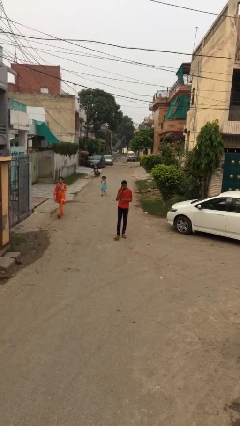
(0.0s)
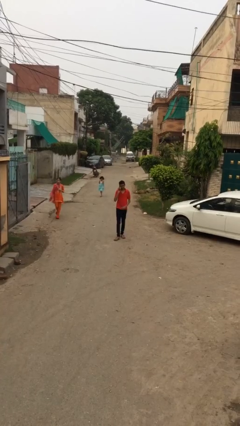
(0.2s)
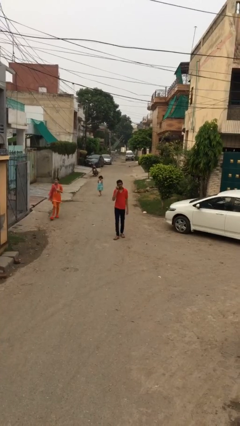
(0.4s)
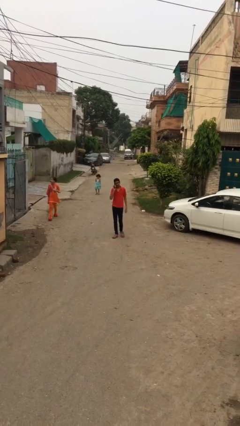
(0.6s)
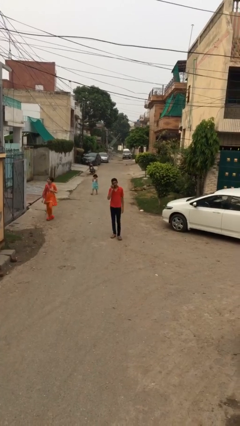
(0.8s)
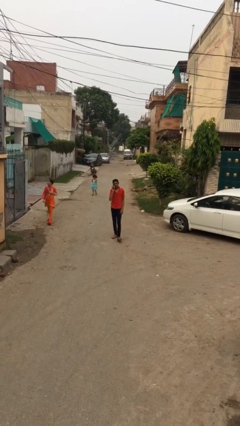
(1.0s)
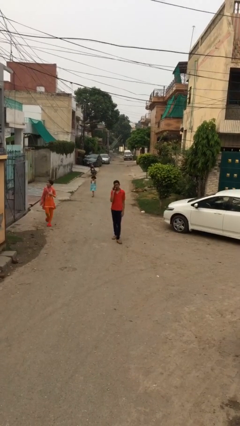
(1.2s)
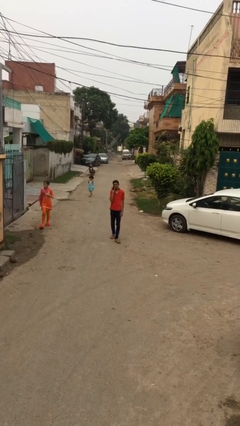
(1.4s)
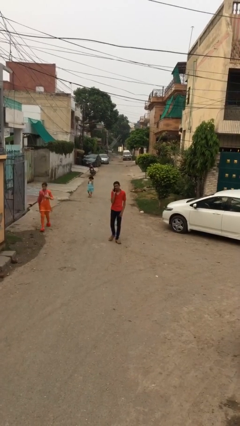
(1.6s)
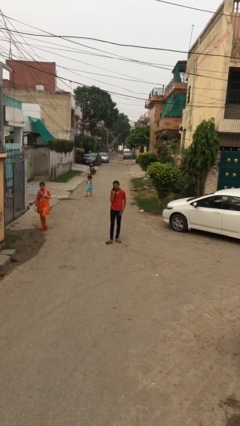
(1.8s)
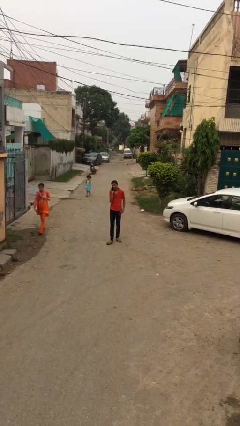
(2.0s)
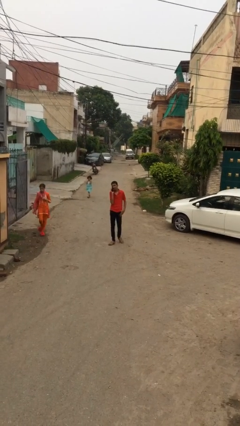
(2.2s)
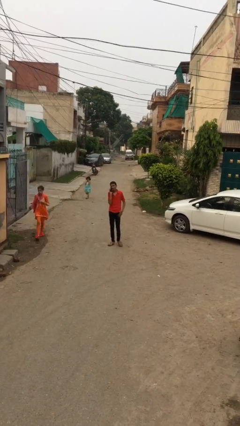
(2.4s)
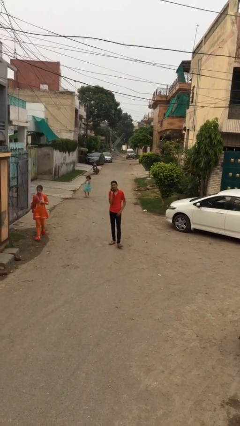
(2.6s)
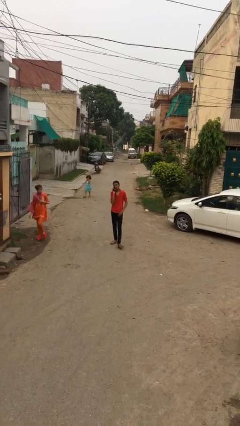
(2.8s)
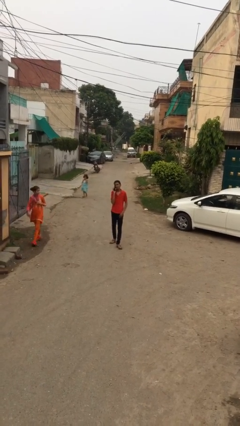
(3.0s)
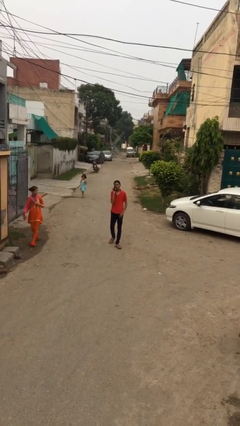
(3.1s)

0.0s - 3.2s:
person talks on phone

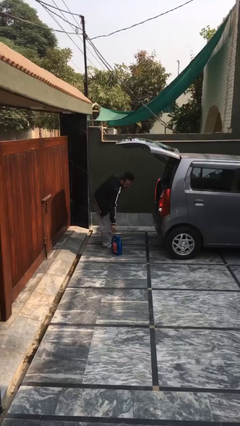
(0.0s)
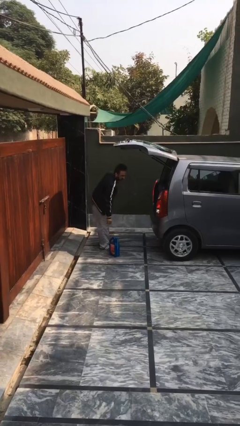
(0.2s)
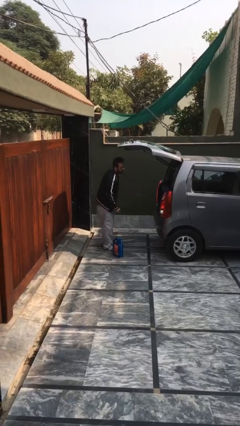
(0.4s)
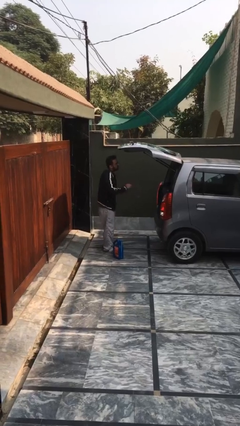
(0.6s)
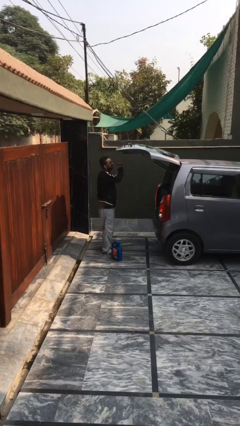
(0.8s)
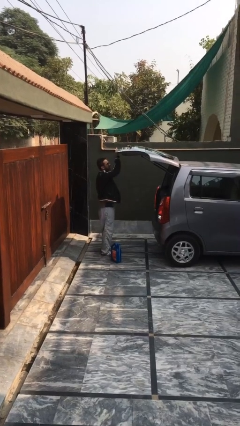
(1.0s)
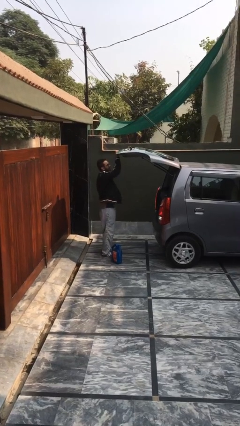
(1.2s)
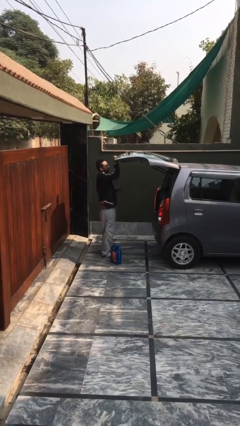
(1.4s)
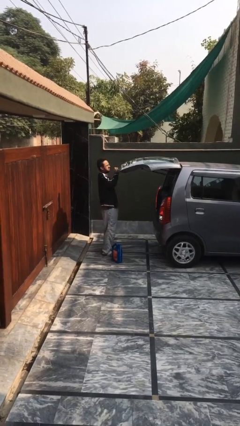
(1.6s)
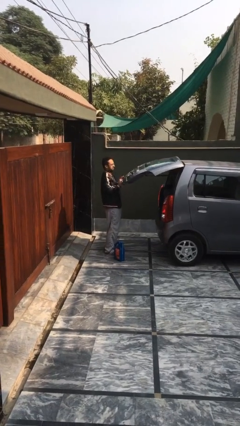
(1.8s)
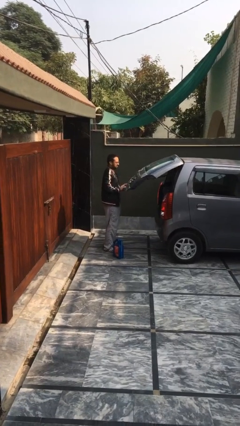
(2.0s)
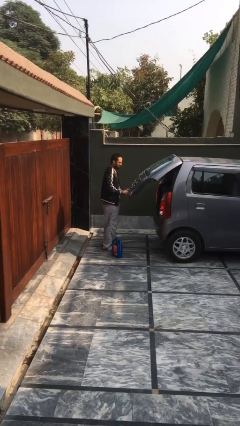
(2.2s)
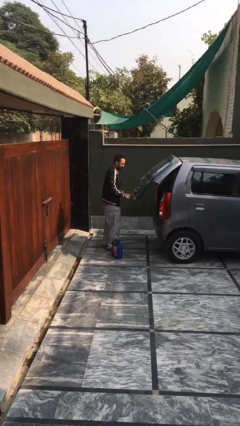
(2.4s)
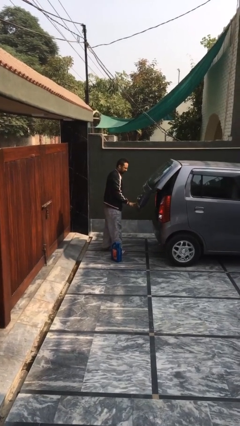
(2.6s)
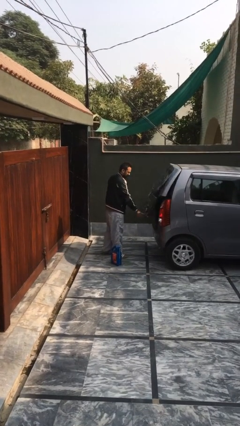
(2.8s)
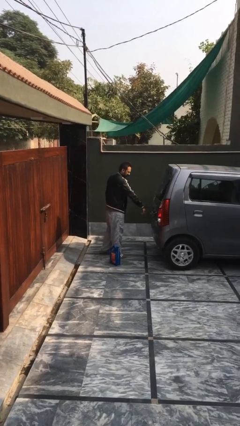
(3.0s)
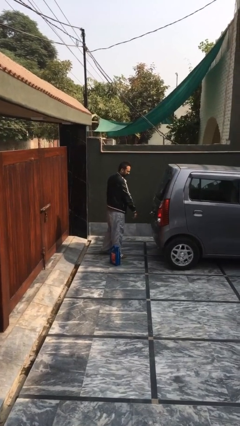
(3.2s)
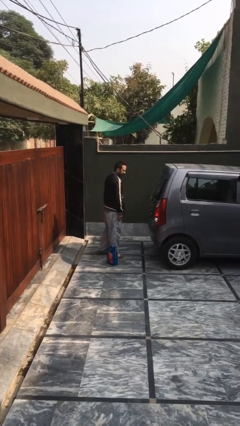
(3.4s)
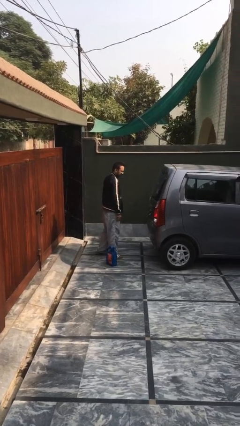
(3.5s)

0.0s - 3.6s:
person closes car trunk

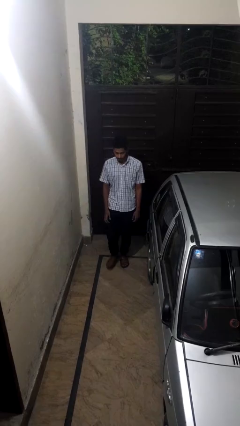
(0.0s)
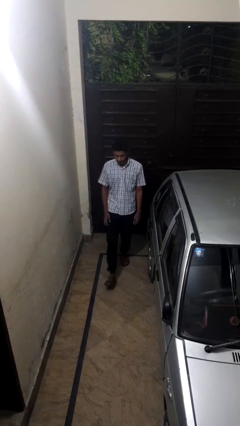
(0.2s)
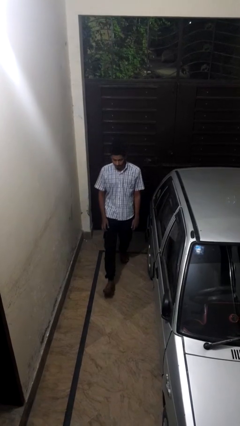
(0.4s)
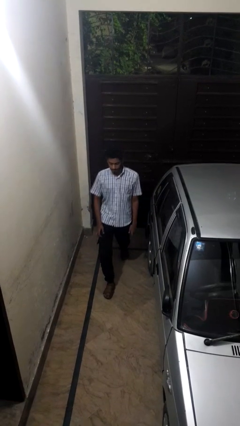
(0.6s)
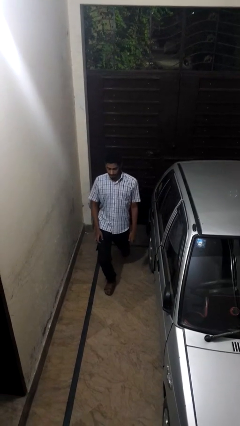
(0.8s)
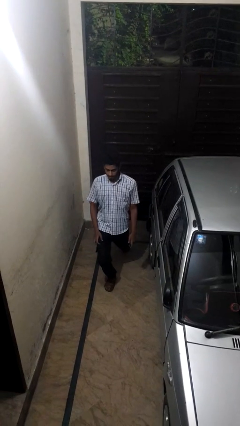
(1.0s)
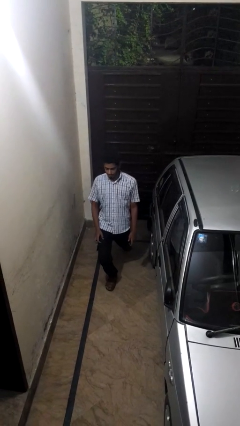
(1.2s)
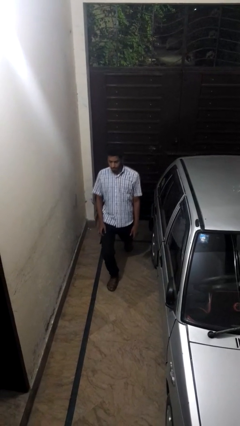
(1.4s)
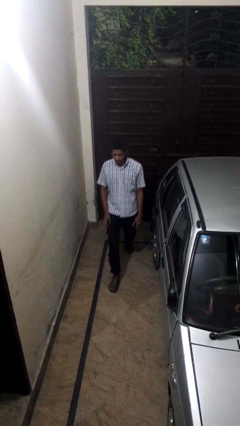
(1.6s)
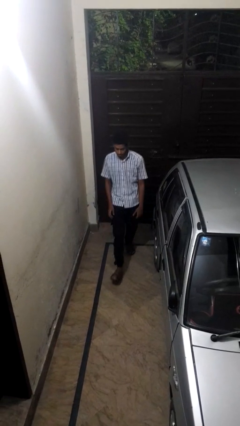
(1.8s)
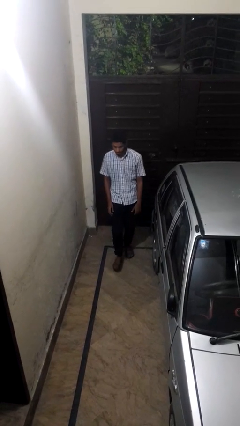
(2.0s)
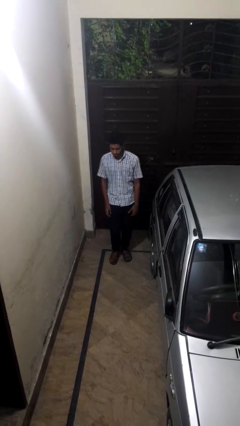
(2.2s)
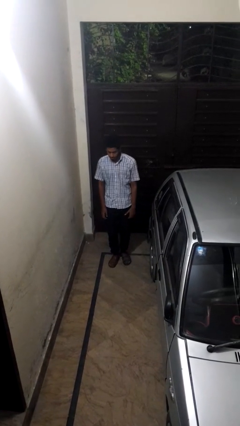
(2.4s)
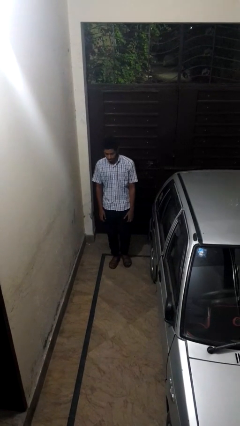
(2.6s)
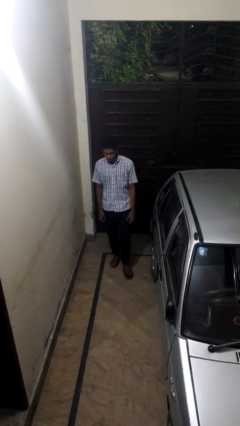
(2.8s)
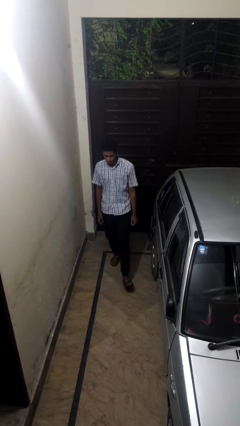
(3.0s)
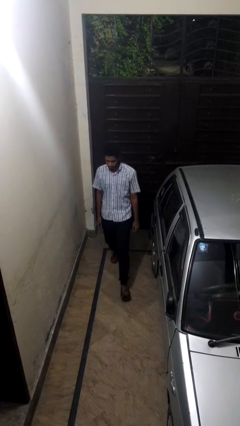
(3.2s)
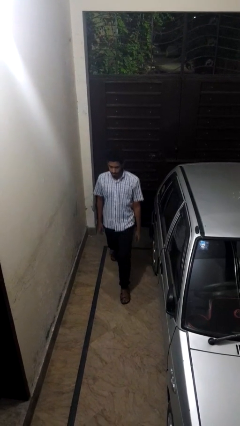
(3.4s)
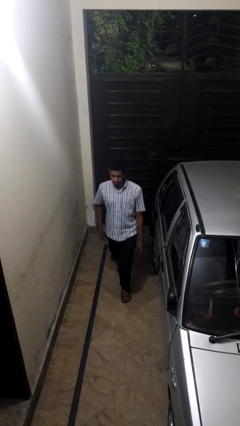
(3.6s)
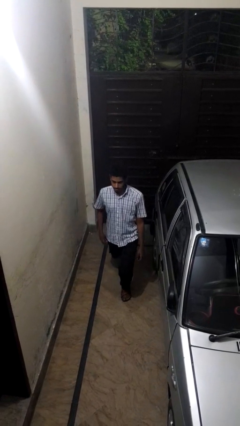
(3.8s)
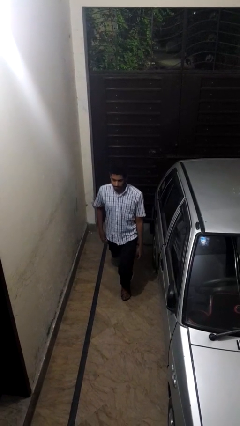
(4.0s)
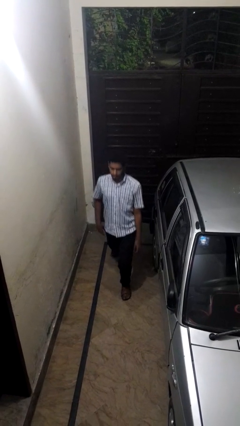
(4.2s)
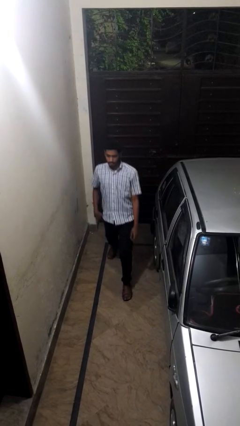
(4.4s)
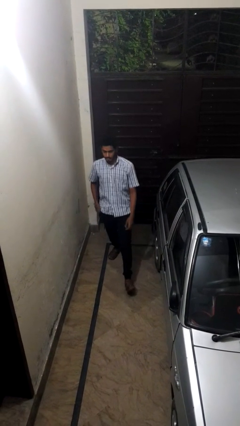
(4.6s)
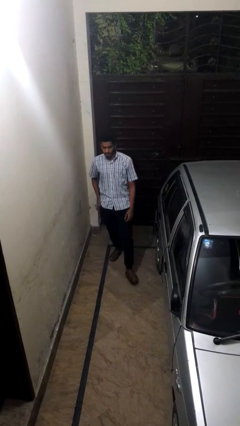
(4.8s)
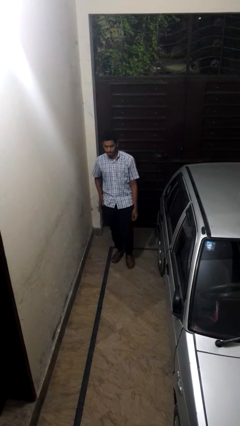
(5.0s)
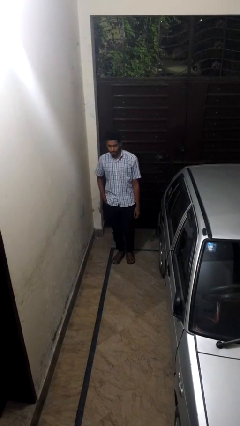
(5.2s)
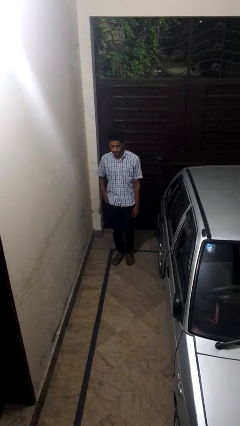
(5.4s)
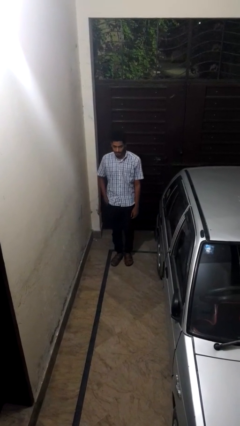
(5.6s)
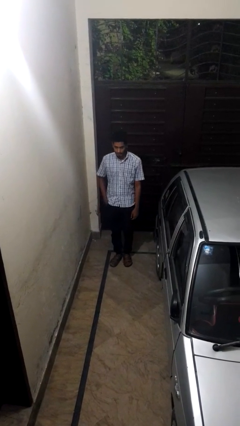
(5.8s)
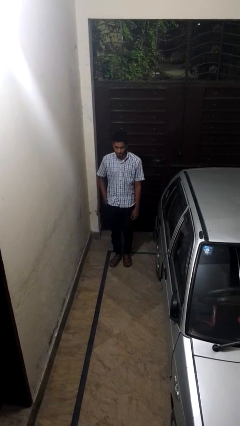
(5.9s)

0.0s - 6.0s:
person exercises with lunges

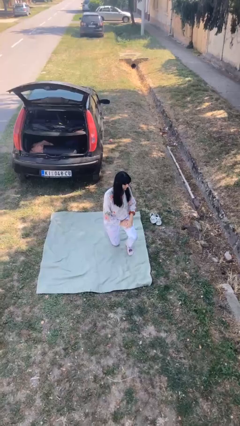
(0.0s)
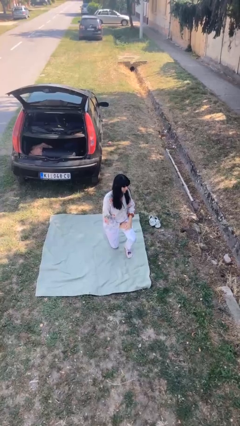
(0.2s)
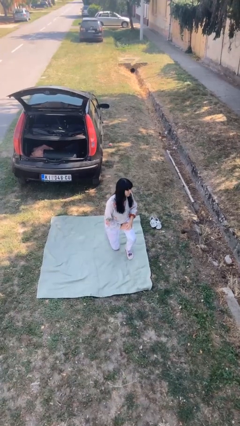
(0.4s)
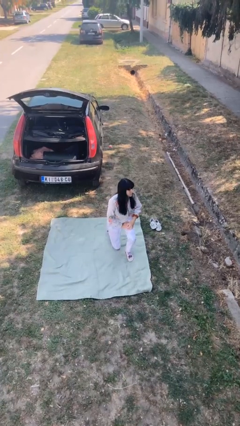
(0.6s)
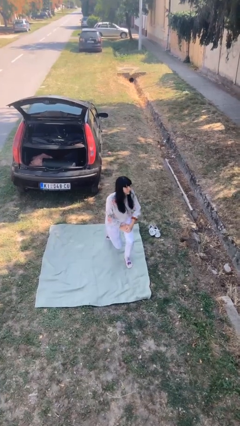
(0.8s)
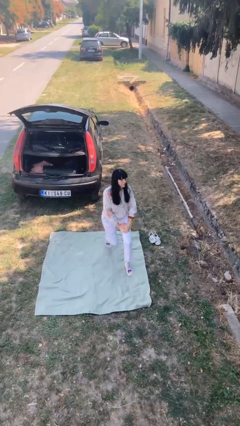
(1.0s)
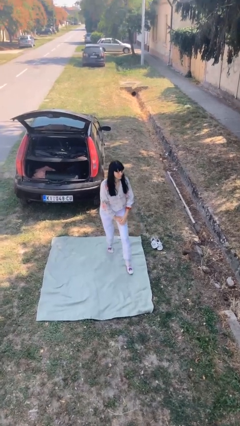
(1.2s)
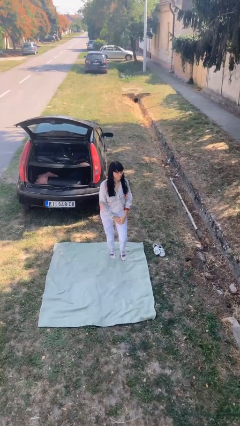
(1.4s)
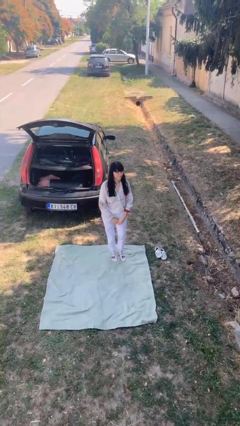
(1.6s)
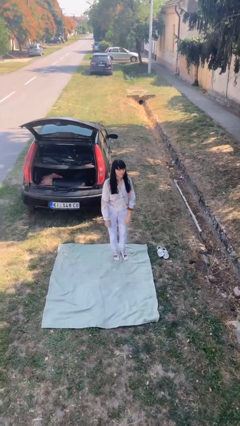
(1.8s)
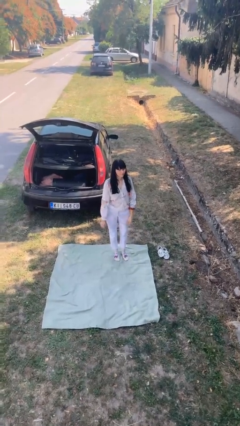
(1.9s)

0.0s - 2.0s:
person stands up from floor

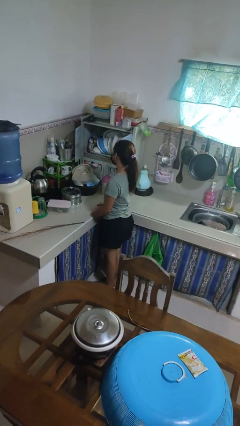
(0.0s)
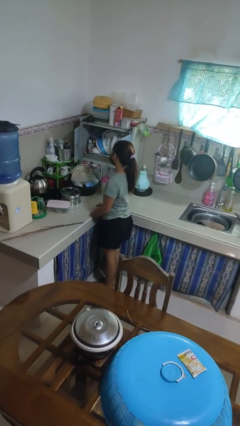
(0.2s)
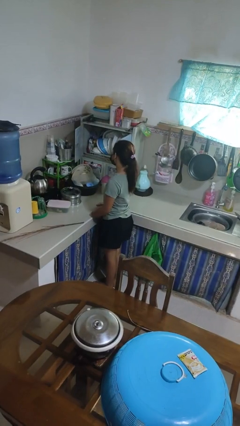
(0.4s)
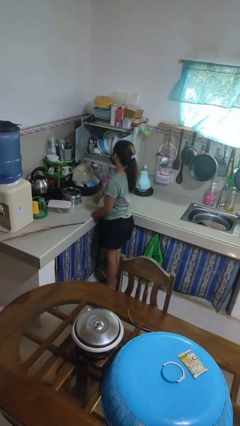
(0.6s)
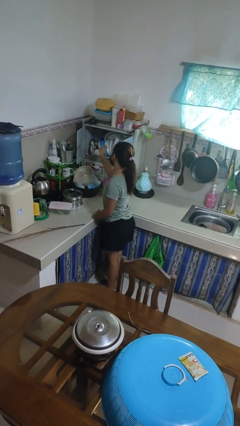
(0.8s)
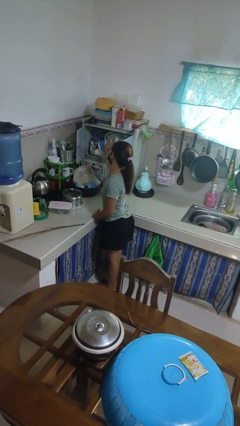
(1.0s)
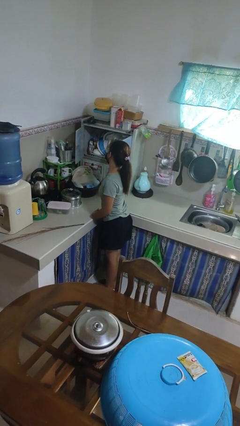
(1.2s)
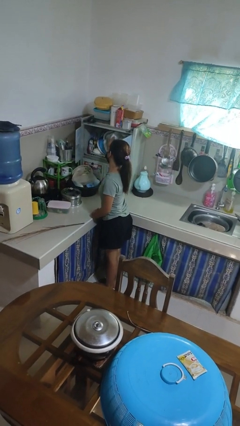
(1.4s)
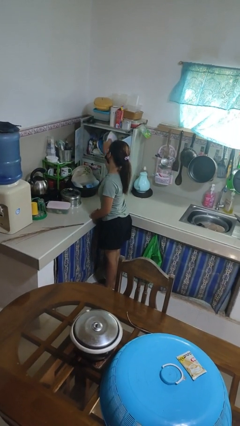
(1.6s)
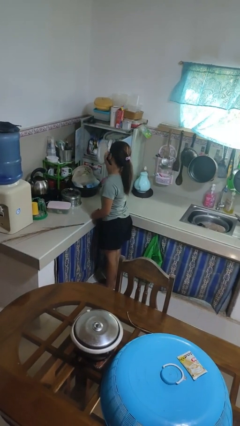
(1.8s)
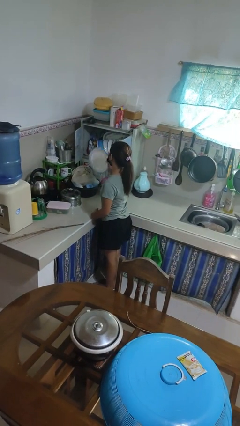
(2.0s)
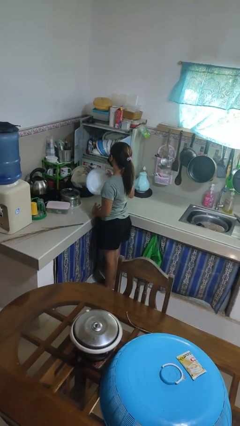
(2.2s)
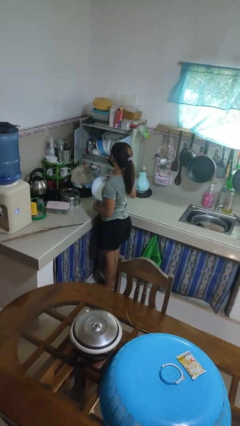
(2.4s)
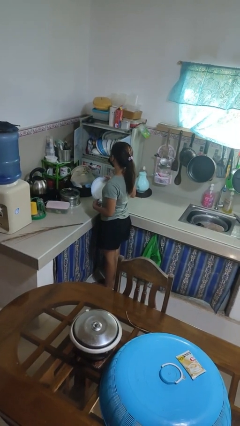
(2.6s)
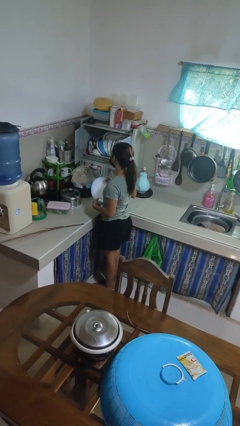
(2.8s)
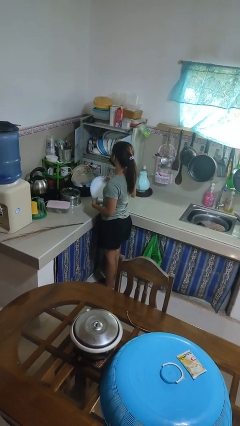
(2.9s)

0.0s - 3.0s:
person takes object from kitchen drawer
